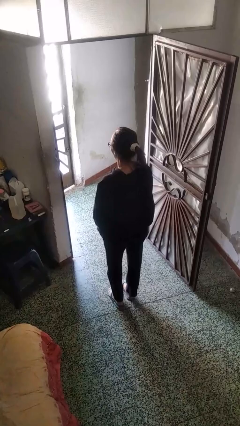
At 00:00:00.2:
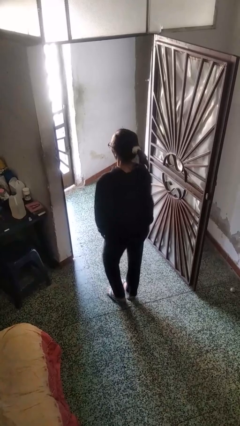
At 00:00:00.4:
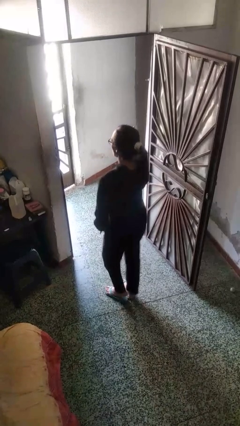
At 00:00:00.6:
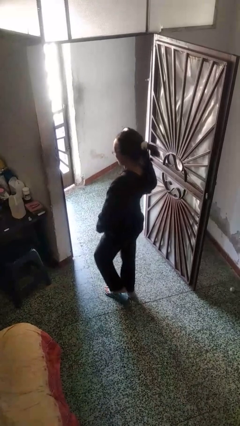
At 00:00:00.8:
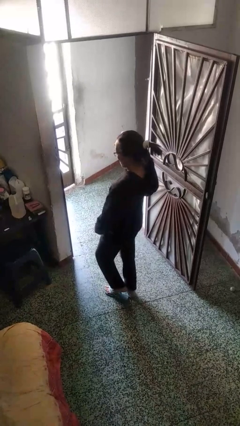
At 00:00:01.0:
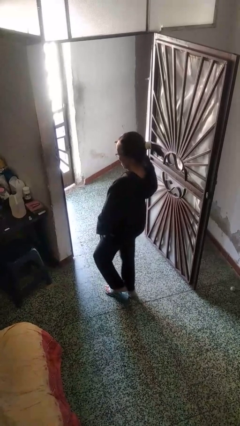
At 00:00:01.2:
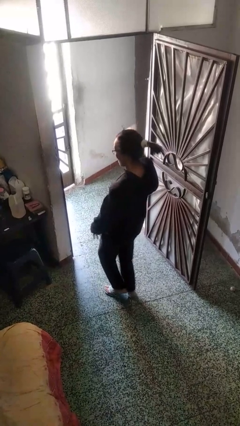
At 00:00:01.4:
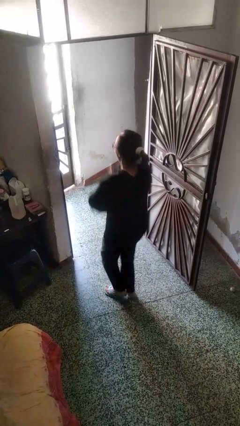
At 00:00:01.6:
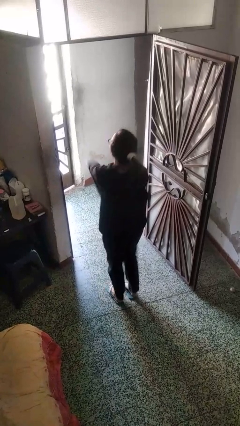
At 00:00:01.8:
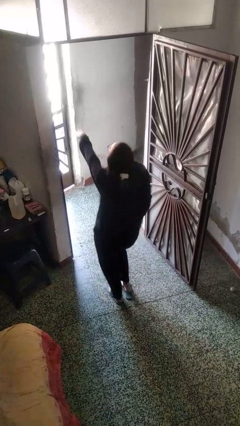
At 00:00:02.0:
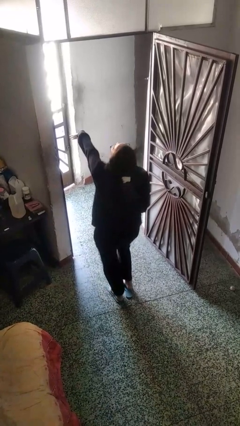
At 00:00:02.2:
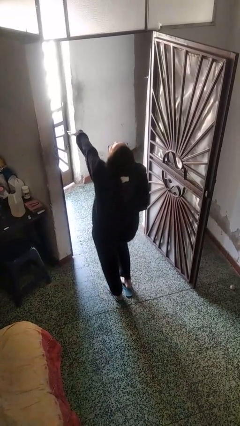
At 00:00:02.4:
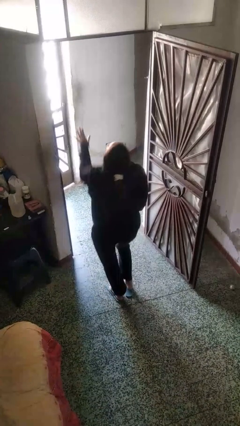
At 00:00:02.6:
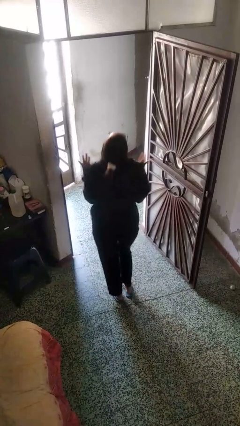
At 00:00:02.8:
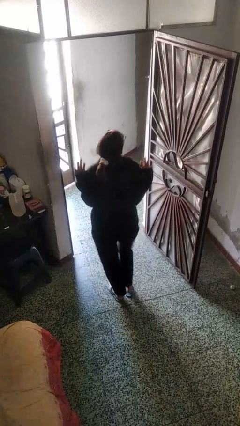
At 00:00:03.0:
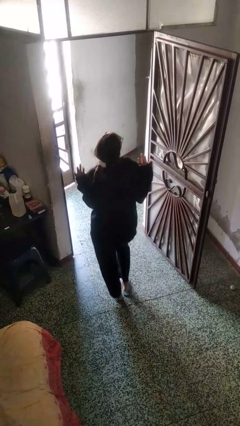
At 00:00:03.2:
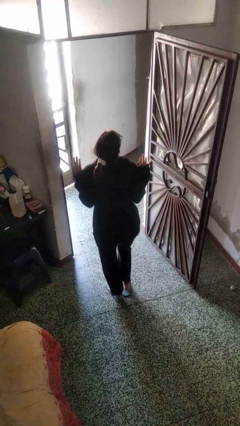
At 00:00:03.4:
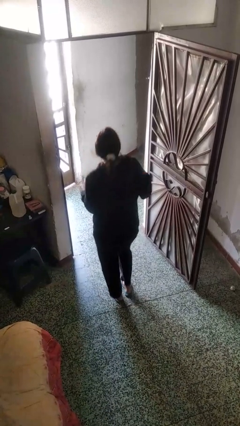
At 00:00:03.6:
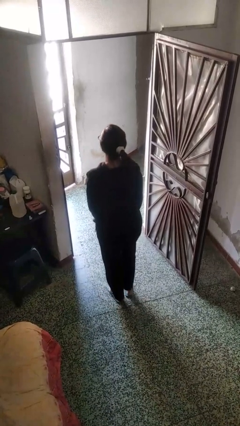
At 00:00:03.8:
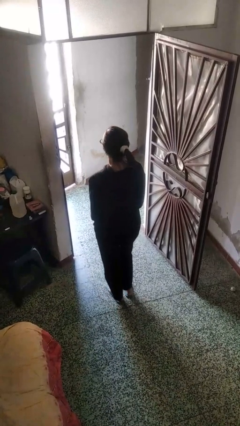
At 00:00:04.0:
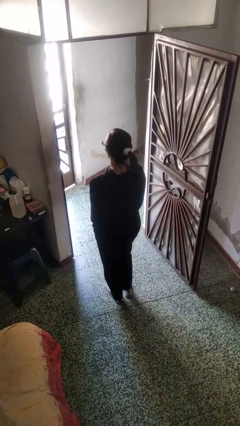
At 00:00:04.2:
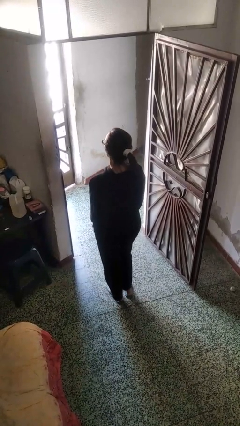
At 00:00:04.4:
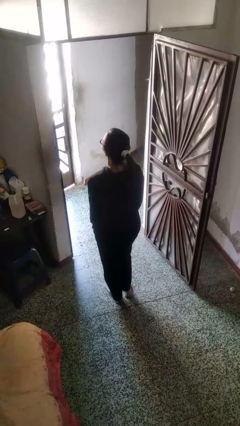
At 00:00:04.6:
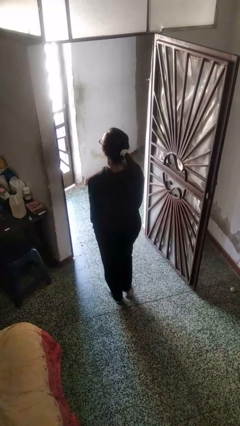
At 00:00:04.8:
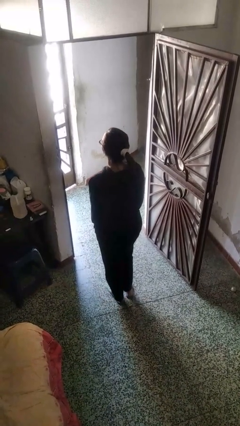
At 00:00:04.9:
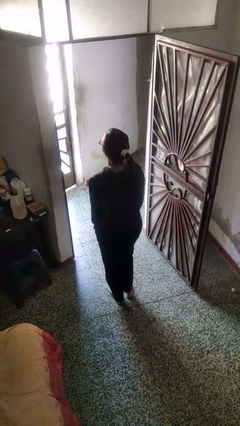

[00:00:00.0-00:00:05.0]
person dances in place

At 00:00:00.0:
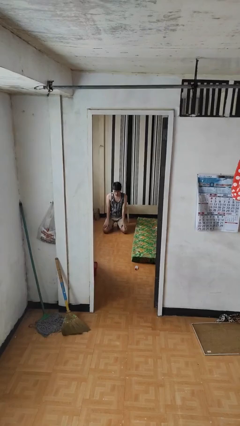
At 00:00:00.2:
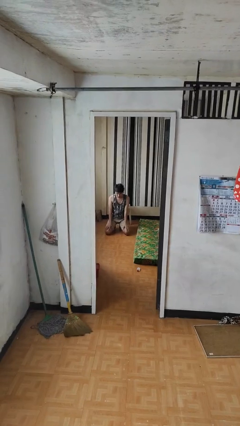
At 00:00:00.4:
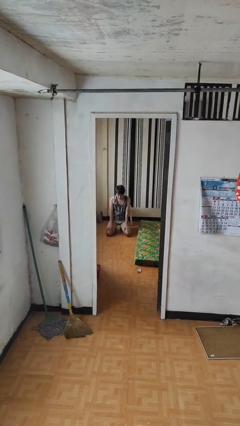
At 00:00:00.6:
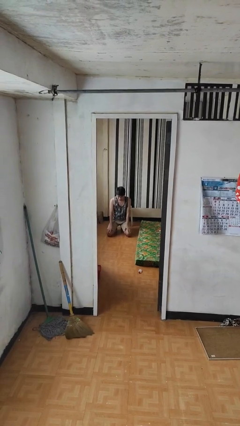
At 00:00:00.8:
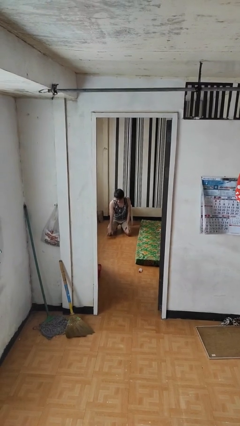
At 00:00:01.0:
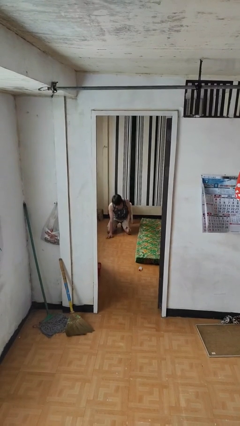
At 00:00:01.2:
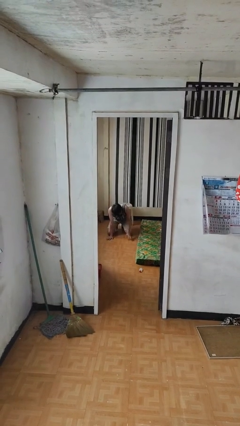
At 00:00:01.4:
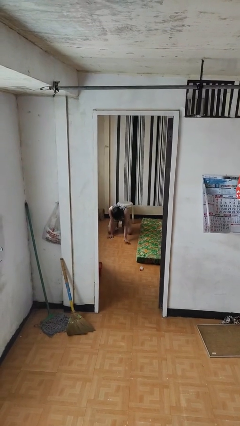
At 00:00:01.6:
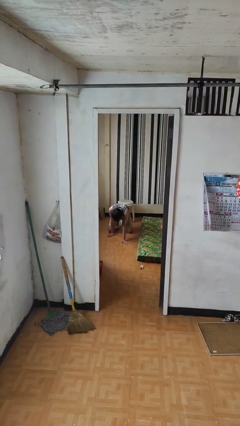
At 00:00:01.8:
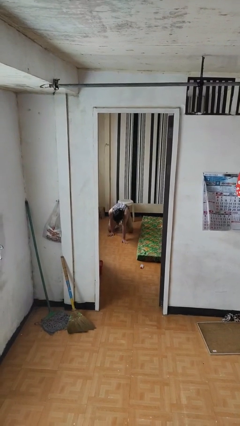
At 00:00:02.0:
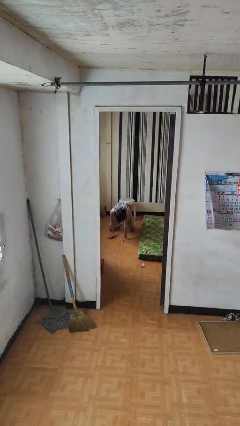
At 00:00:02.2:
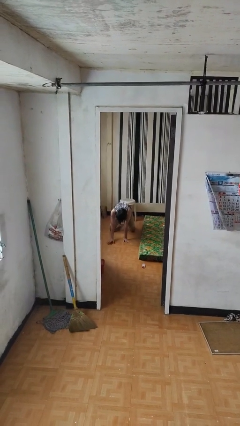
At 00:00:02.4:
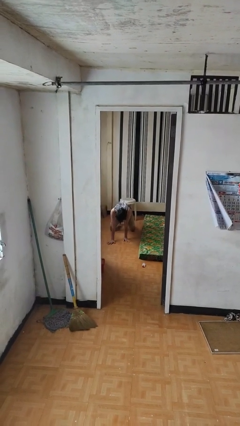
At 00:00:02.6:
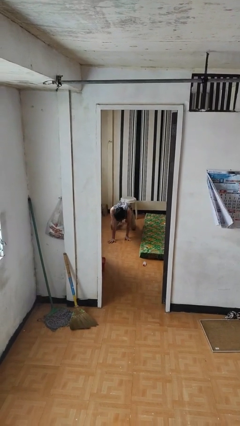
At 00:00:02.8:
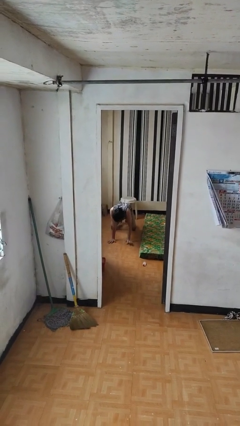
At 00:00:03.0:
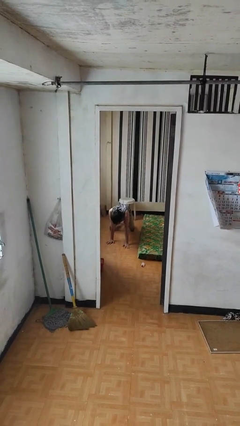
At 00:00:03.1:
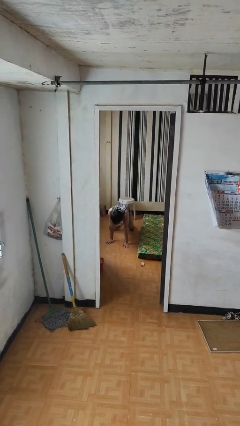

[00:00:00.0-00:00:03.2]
person crawls

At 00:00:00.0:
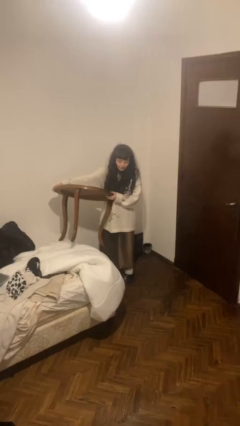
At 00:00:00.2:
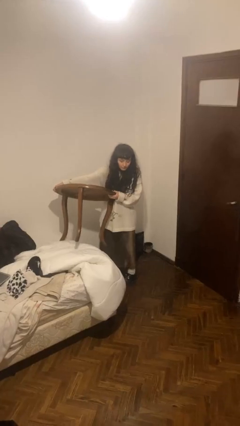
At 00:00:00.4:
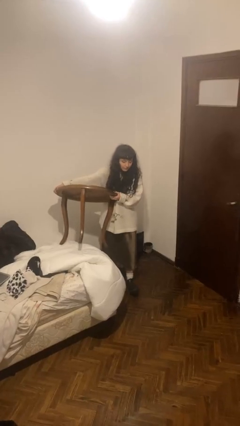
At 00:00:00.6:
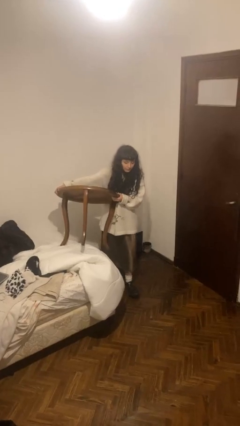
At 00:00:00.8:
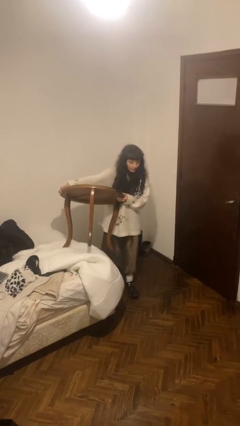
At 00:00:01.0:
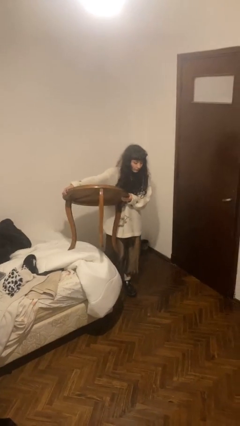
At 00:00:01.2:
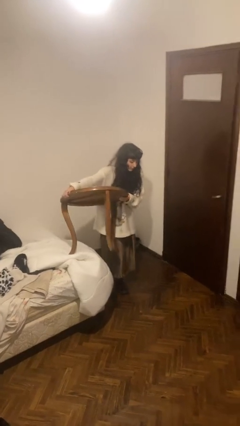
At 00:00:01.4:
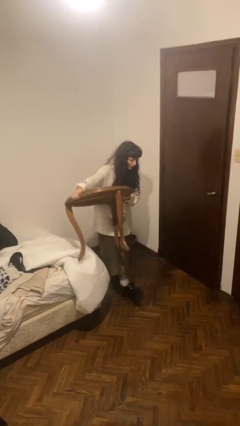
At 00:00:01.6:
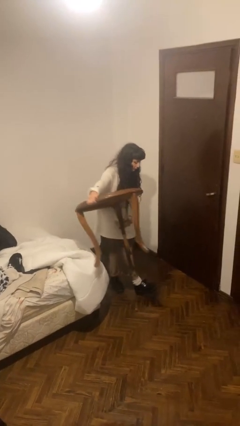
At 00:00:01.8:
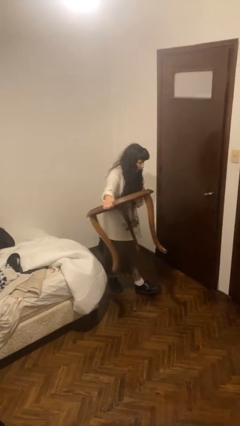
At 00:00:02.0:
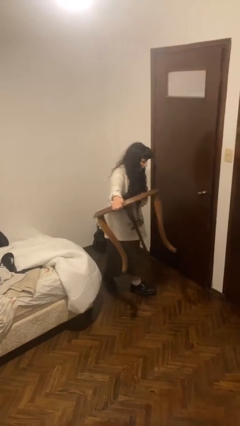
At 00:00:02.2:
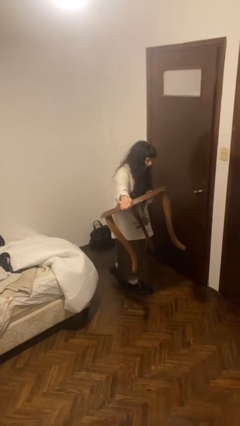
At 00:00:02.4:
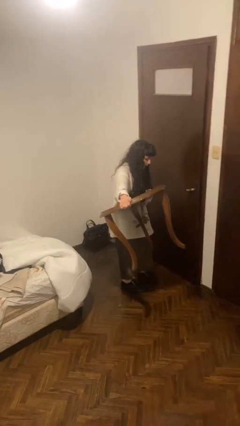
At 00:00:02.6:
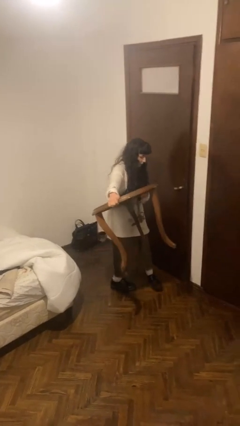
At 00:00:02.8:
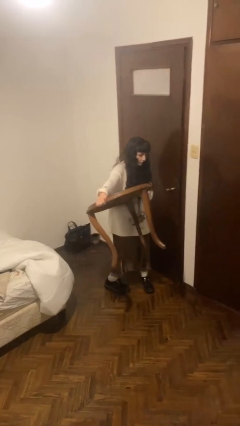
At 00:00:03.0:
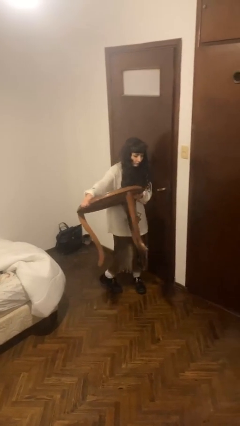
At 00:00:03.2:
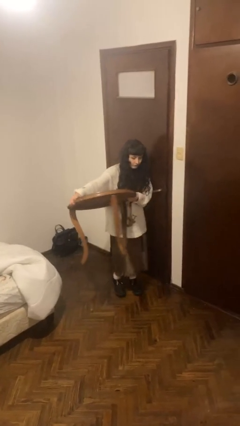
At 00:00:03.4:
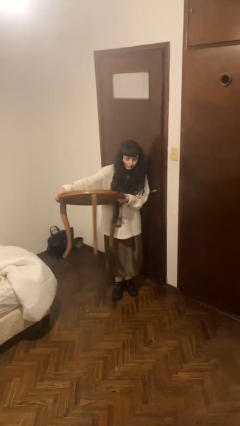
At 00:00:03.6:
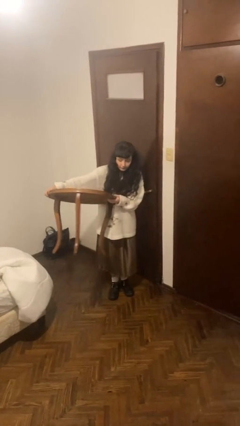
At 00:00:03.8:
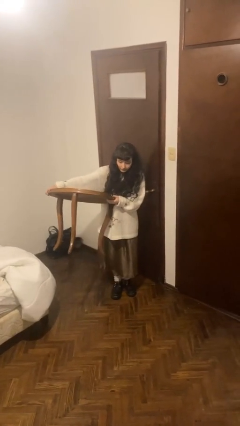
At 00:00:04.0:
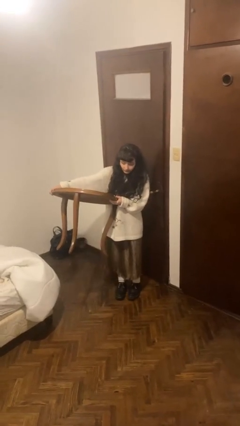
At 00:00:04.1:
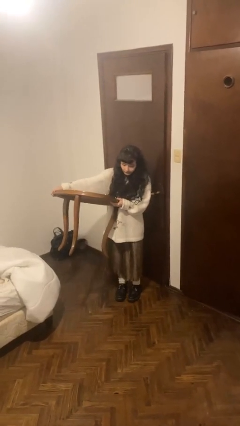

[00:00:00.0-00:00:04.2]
person carries furniture

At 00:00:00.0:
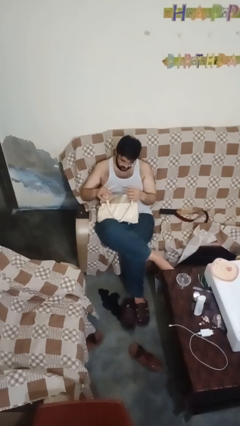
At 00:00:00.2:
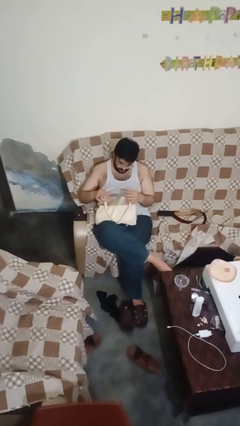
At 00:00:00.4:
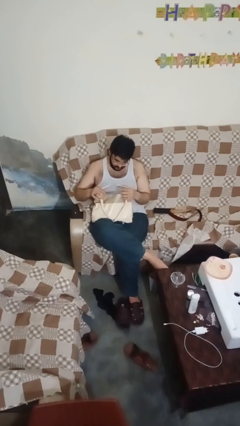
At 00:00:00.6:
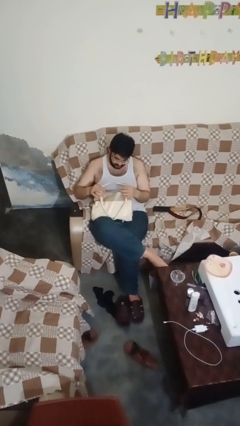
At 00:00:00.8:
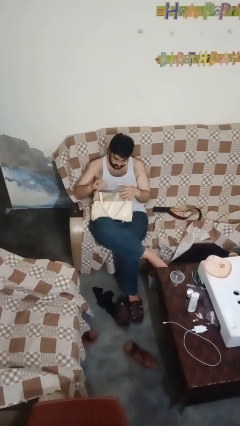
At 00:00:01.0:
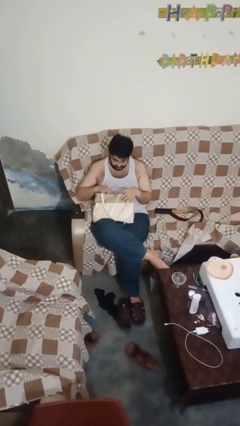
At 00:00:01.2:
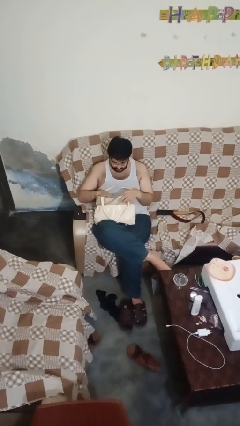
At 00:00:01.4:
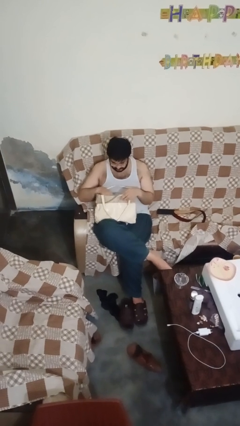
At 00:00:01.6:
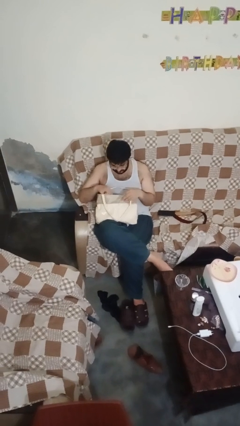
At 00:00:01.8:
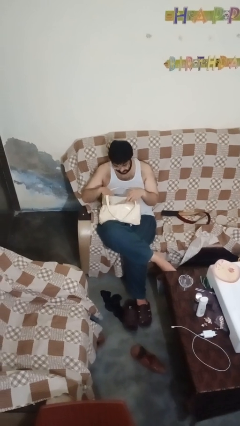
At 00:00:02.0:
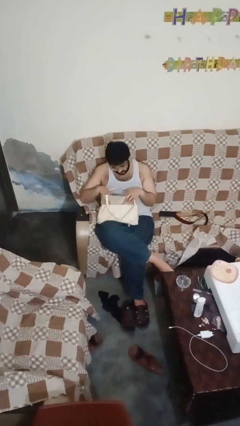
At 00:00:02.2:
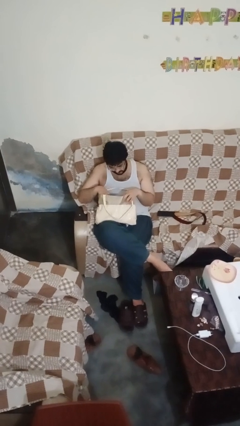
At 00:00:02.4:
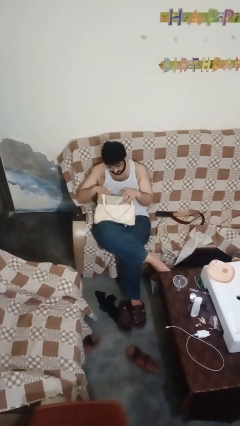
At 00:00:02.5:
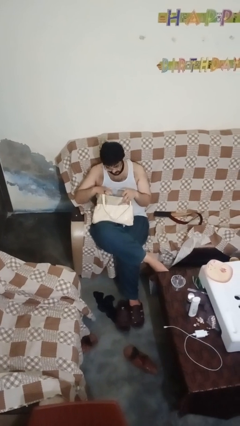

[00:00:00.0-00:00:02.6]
person searches in purse

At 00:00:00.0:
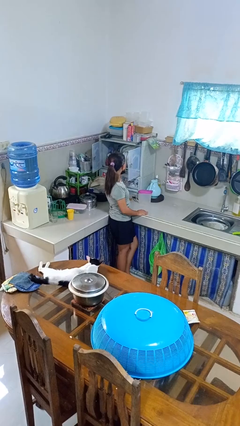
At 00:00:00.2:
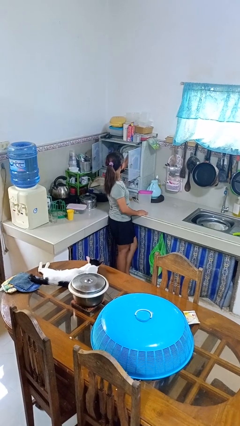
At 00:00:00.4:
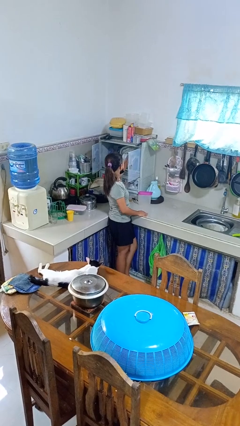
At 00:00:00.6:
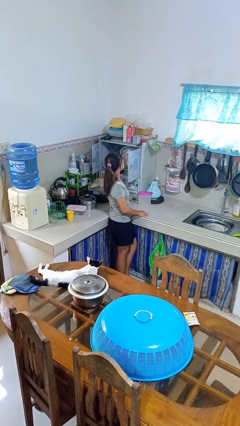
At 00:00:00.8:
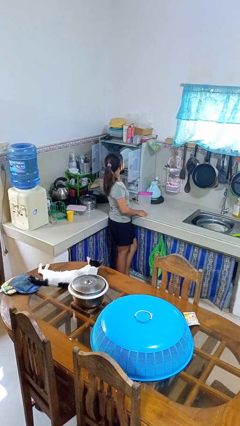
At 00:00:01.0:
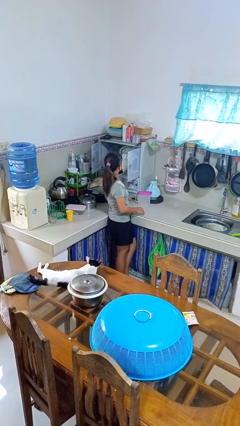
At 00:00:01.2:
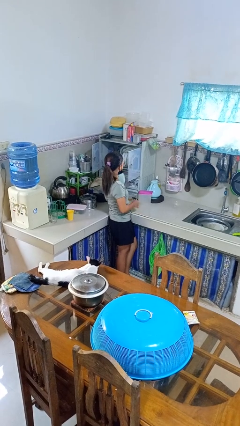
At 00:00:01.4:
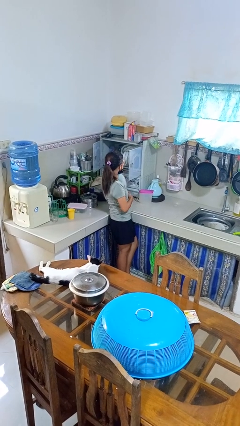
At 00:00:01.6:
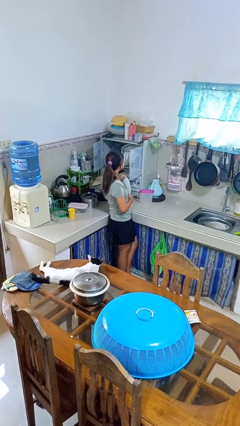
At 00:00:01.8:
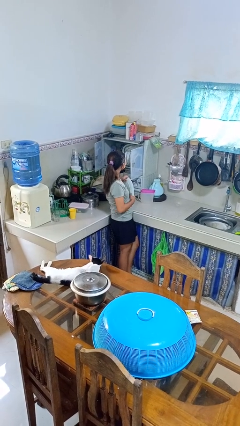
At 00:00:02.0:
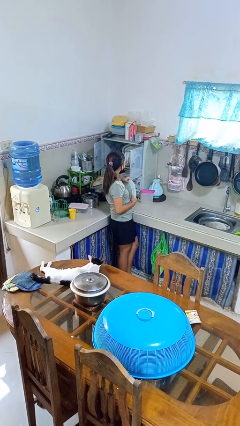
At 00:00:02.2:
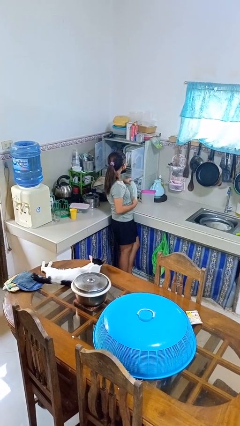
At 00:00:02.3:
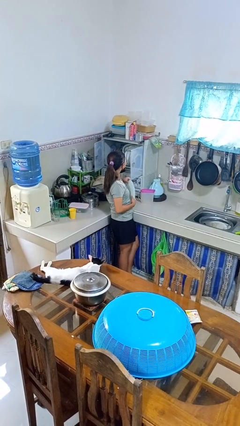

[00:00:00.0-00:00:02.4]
person takes object from kitchen drawer
